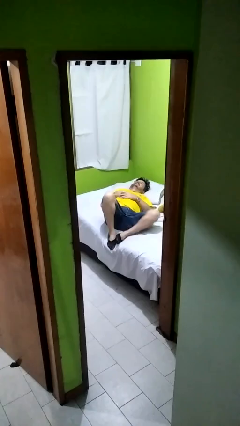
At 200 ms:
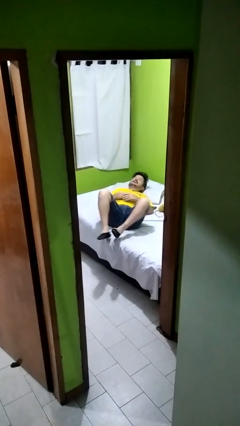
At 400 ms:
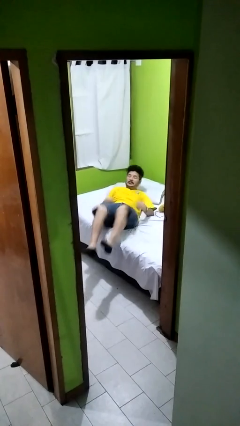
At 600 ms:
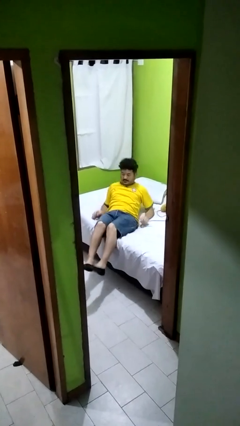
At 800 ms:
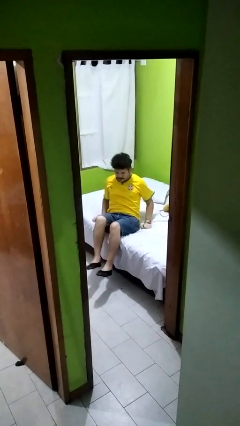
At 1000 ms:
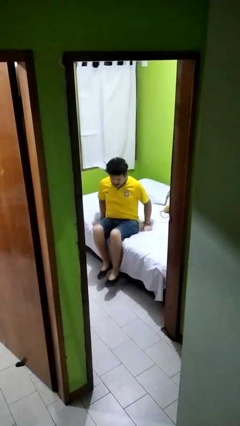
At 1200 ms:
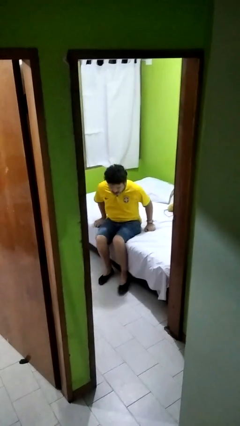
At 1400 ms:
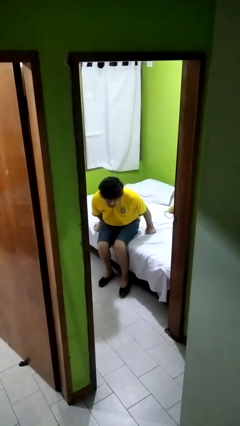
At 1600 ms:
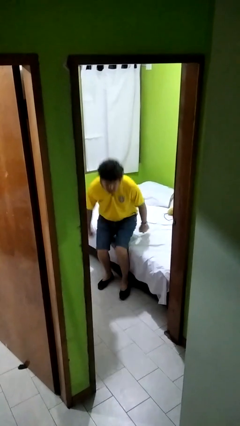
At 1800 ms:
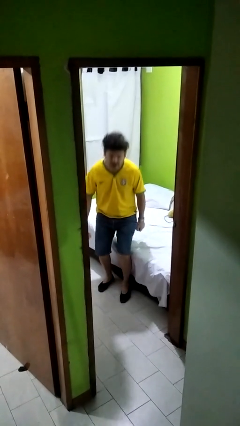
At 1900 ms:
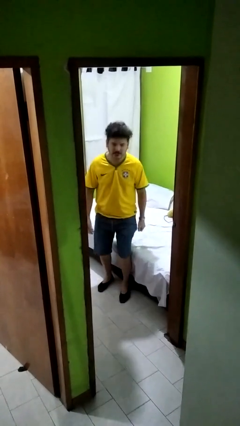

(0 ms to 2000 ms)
person stands up

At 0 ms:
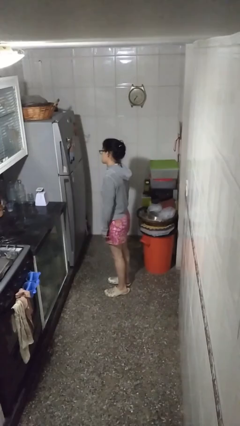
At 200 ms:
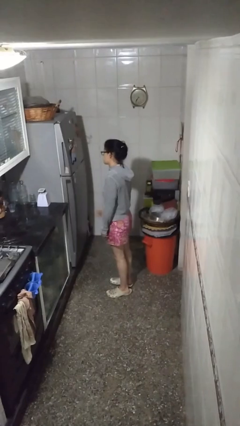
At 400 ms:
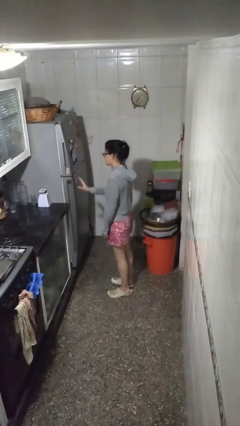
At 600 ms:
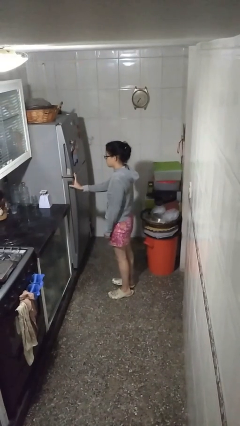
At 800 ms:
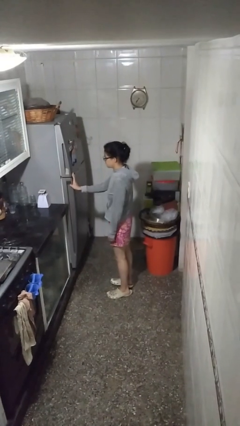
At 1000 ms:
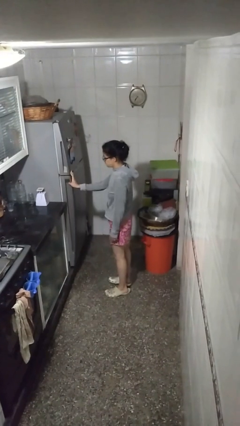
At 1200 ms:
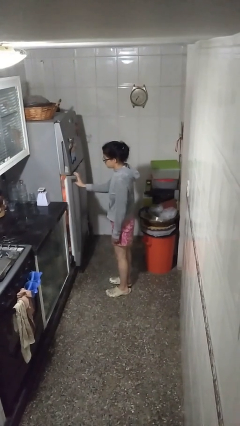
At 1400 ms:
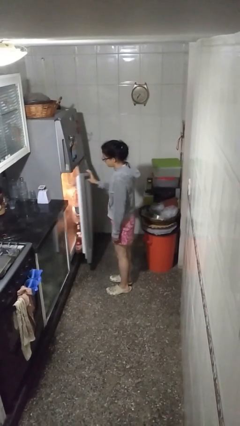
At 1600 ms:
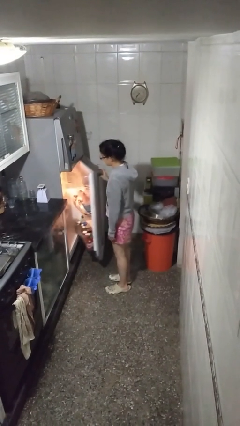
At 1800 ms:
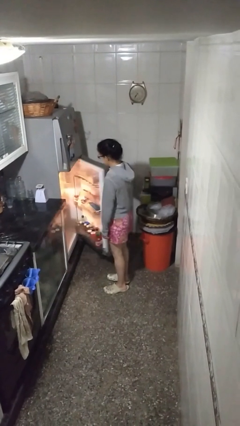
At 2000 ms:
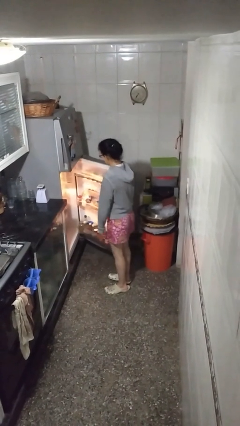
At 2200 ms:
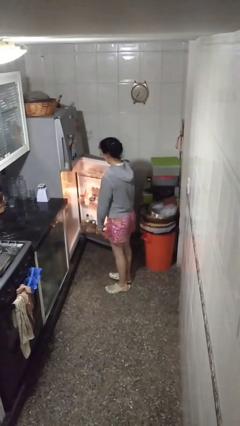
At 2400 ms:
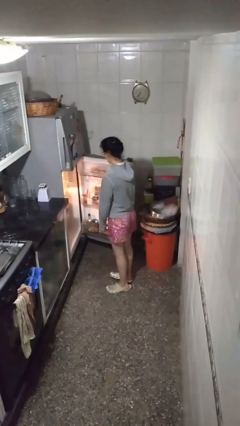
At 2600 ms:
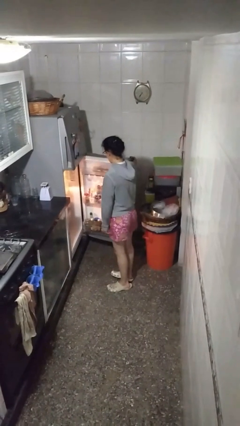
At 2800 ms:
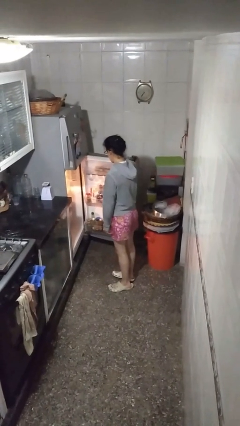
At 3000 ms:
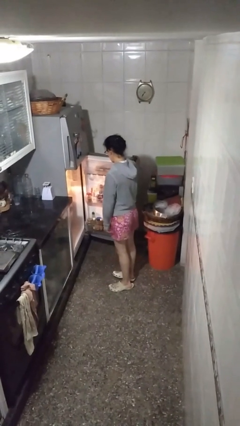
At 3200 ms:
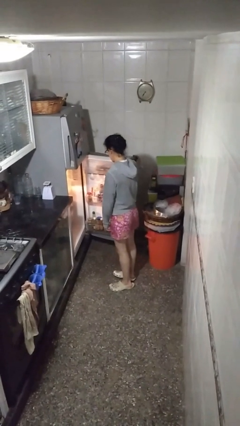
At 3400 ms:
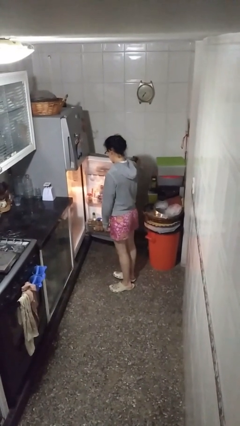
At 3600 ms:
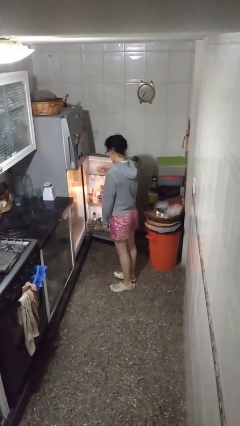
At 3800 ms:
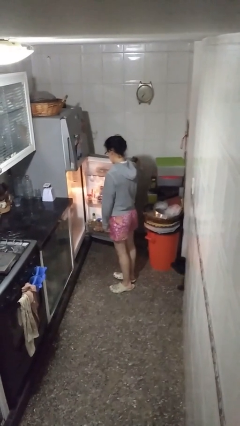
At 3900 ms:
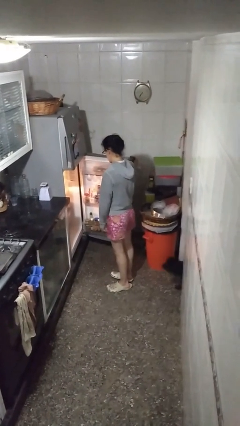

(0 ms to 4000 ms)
person opens refrigerator

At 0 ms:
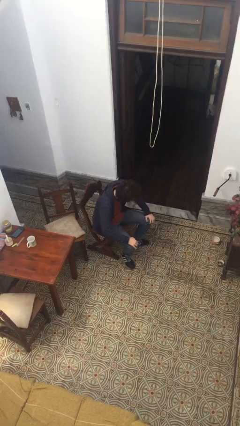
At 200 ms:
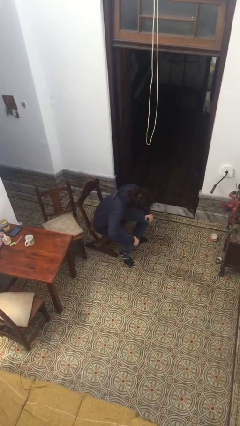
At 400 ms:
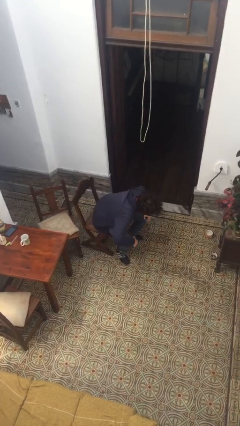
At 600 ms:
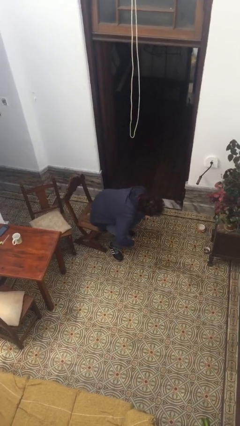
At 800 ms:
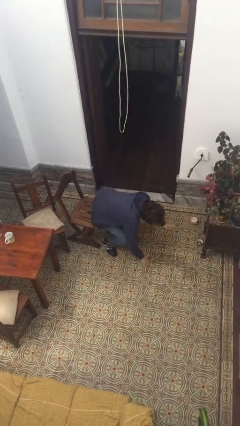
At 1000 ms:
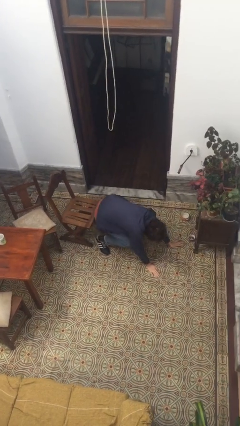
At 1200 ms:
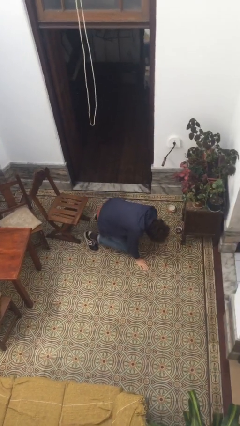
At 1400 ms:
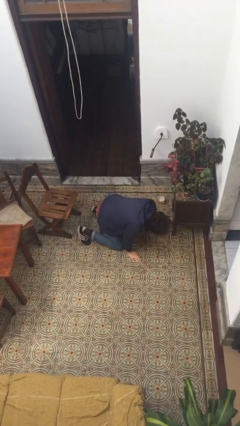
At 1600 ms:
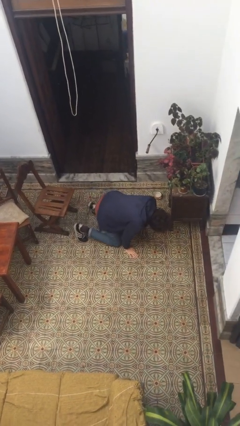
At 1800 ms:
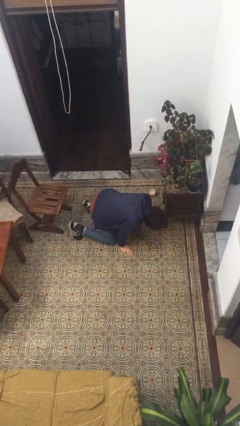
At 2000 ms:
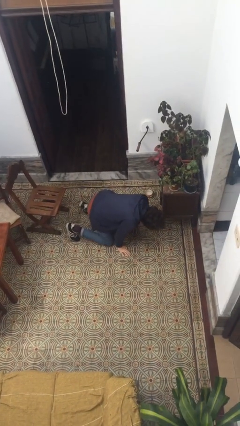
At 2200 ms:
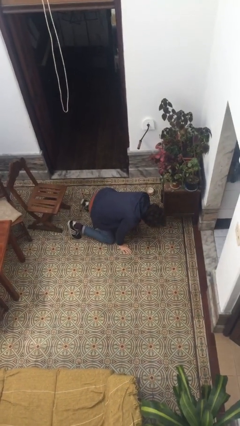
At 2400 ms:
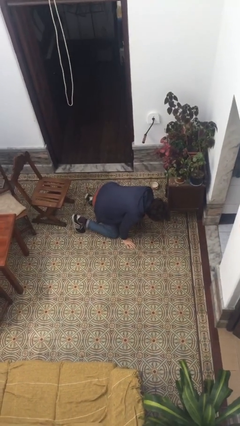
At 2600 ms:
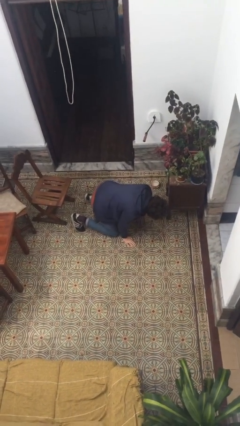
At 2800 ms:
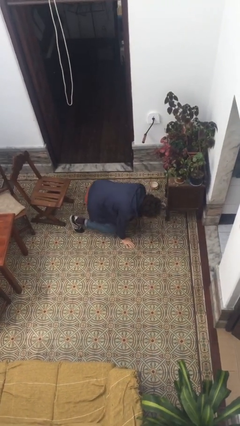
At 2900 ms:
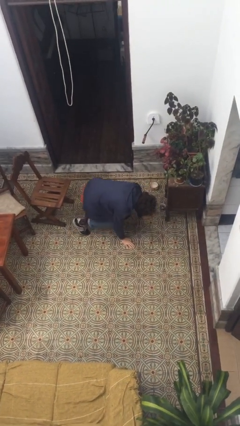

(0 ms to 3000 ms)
person falls from chair

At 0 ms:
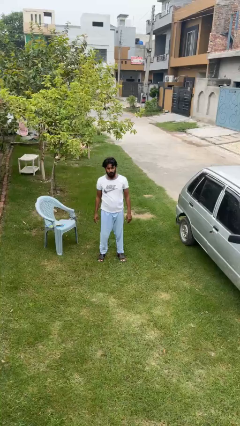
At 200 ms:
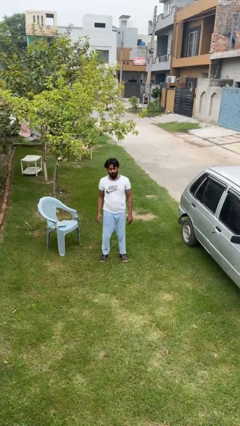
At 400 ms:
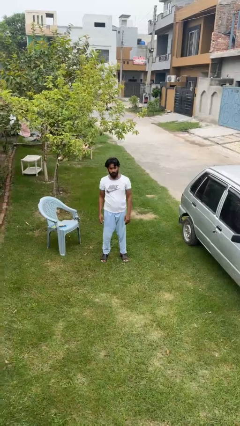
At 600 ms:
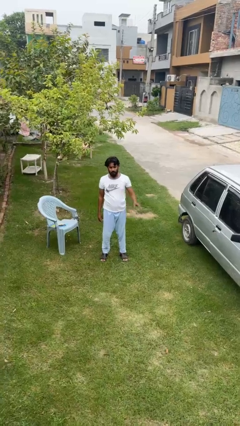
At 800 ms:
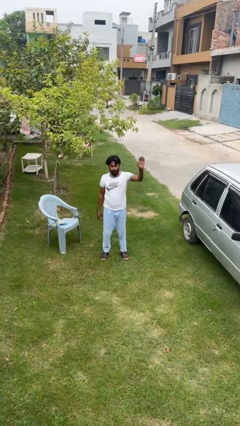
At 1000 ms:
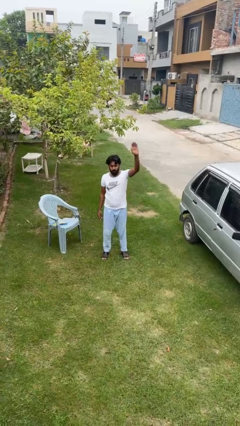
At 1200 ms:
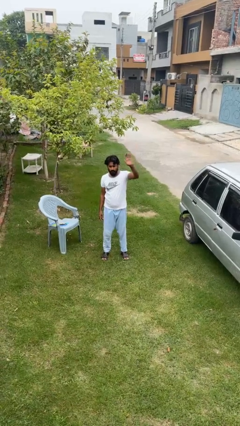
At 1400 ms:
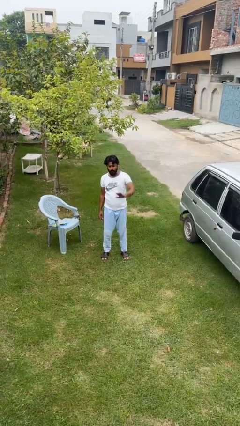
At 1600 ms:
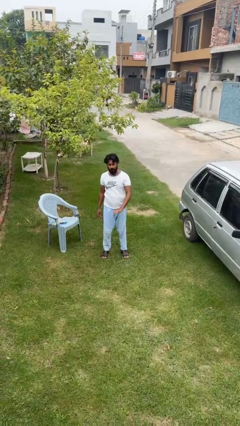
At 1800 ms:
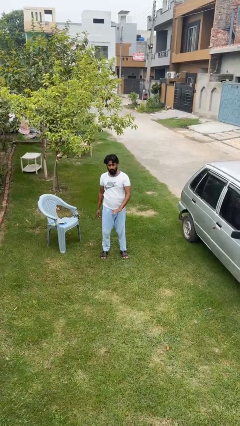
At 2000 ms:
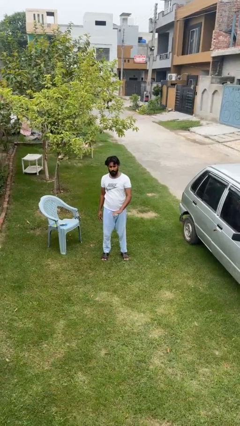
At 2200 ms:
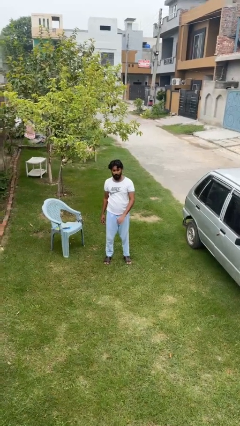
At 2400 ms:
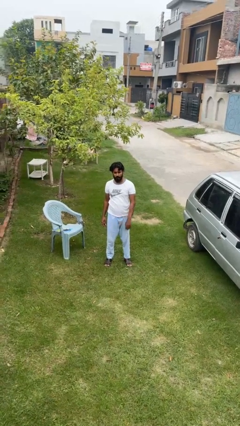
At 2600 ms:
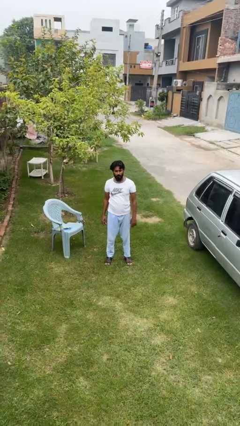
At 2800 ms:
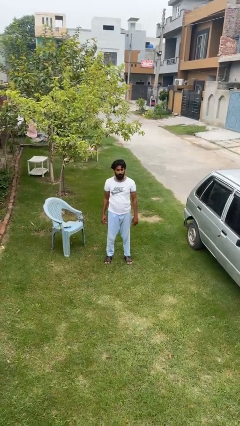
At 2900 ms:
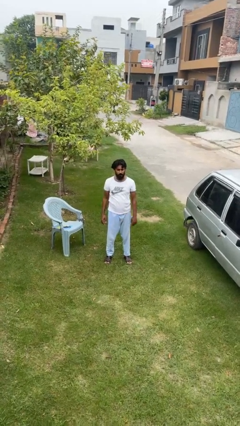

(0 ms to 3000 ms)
person gestures swipe down

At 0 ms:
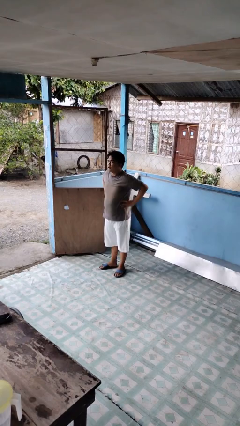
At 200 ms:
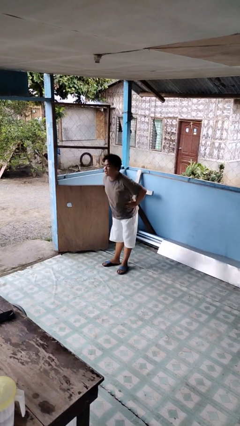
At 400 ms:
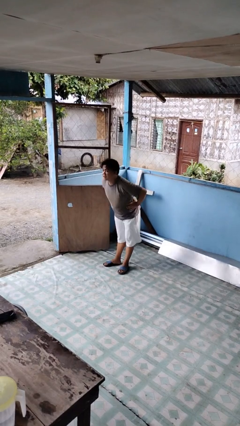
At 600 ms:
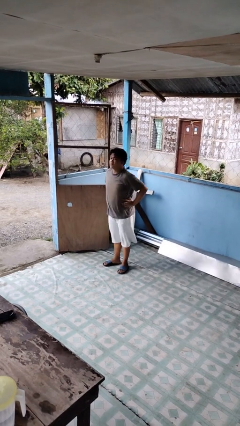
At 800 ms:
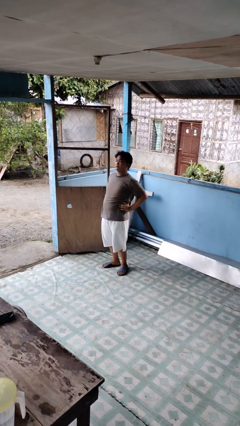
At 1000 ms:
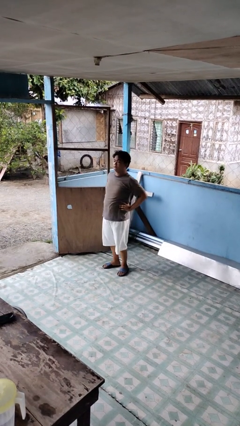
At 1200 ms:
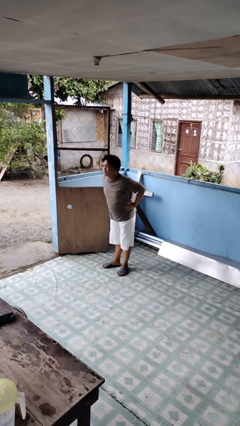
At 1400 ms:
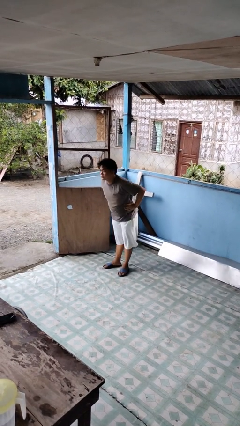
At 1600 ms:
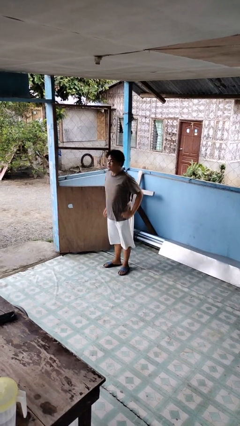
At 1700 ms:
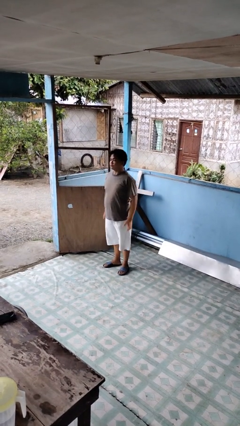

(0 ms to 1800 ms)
person wiggles hips

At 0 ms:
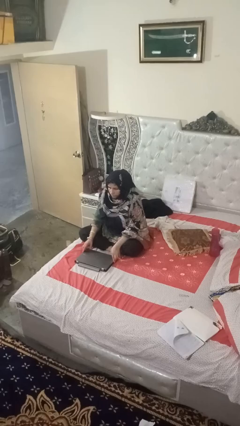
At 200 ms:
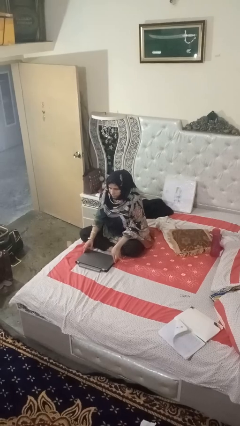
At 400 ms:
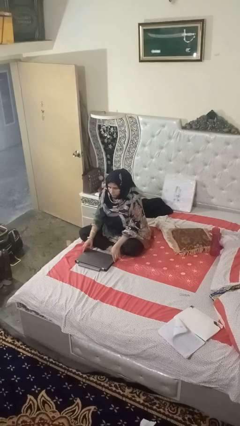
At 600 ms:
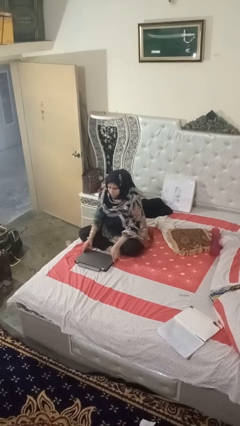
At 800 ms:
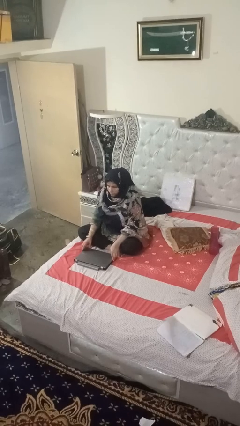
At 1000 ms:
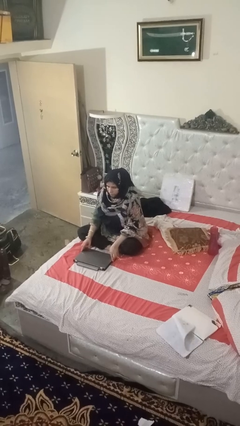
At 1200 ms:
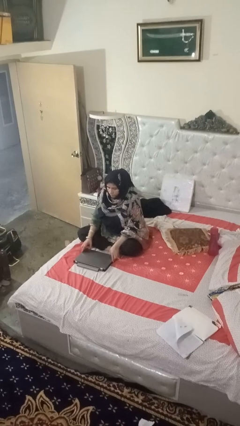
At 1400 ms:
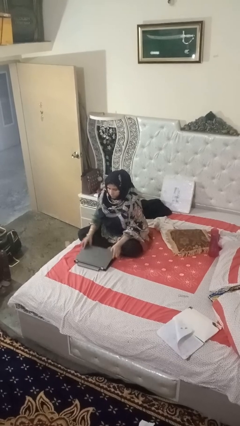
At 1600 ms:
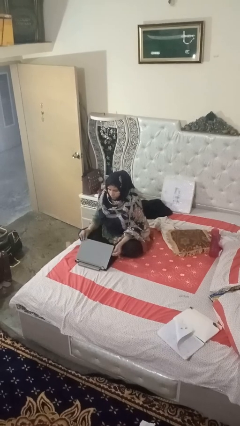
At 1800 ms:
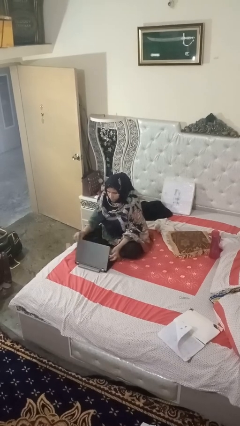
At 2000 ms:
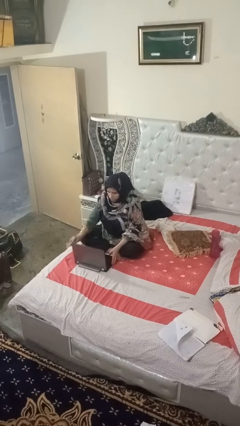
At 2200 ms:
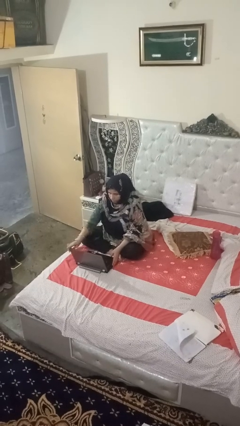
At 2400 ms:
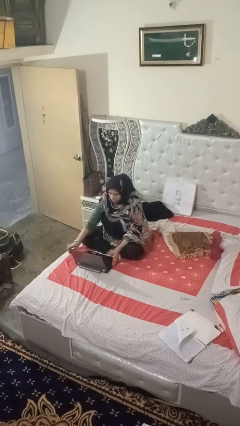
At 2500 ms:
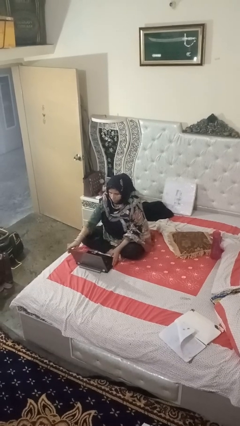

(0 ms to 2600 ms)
person opens laptop

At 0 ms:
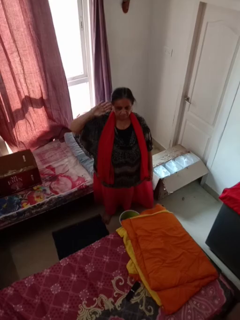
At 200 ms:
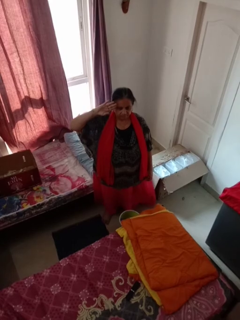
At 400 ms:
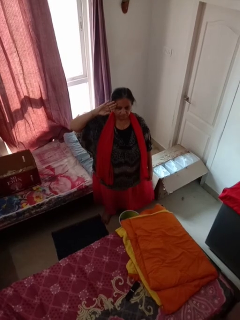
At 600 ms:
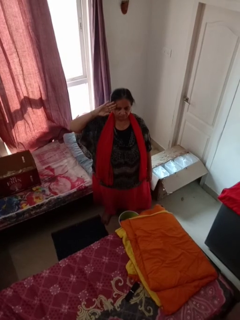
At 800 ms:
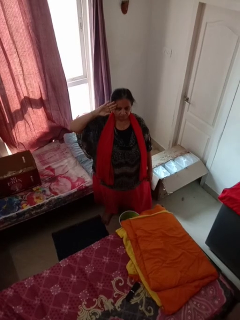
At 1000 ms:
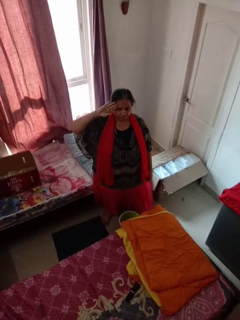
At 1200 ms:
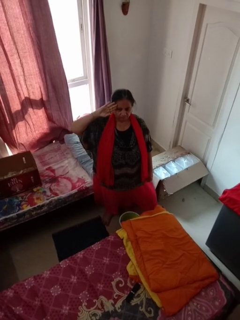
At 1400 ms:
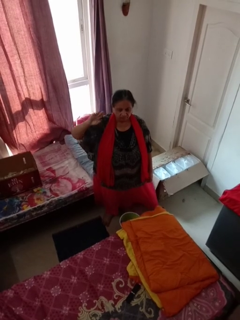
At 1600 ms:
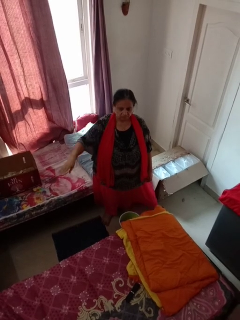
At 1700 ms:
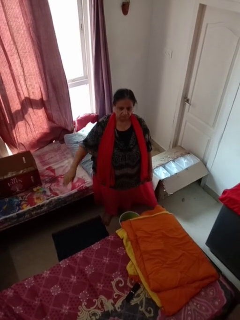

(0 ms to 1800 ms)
person salutes
